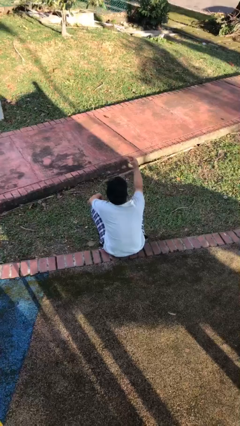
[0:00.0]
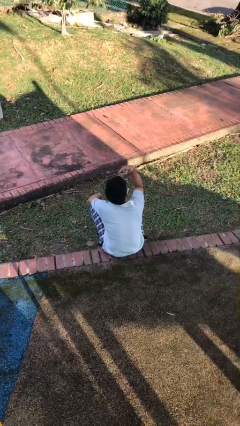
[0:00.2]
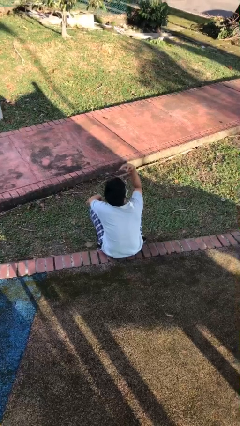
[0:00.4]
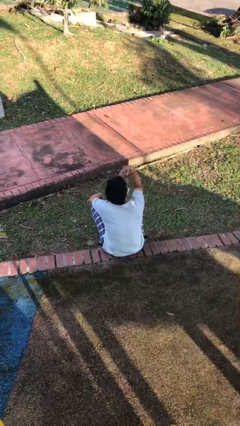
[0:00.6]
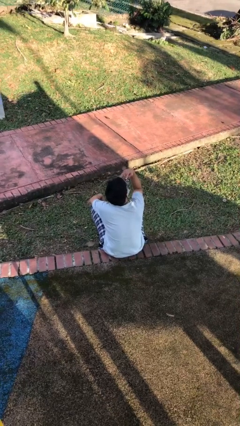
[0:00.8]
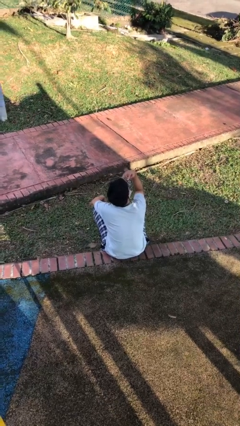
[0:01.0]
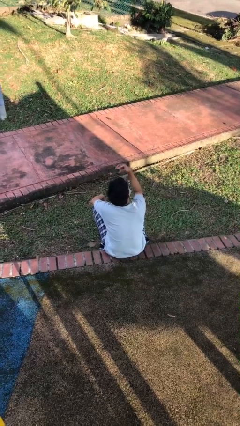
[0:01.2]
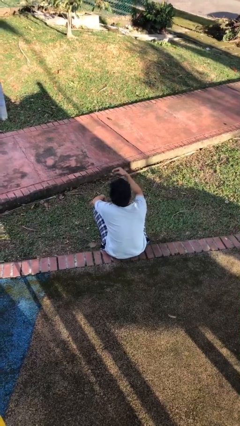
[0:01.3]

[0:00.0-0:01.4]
person gestures watch closely

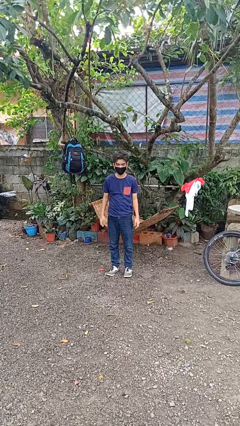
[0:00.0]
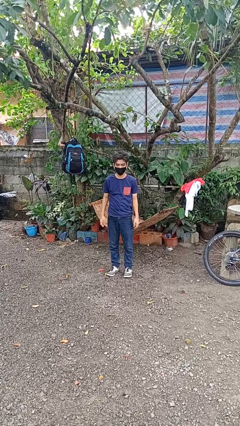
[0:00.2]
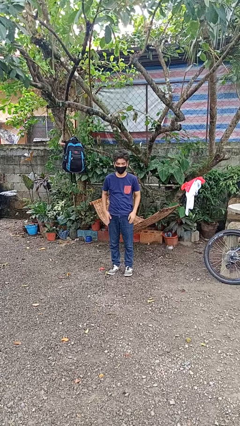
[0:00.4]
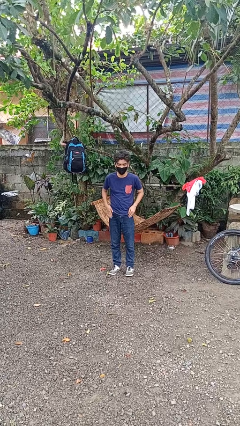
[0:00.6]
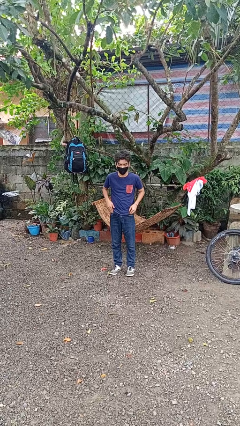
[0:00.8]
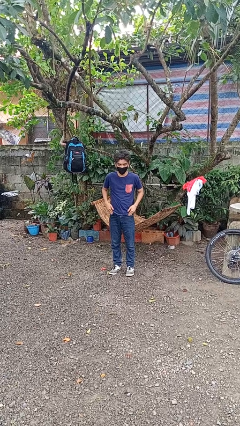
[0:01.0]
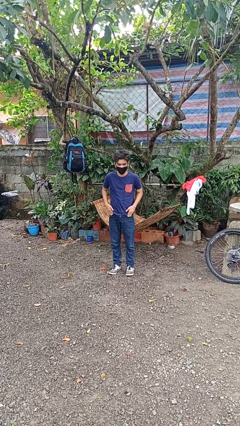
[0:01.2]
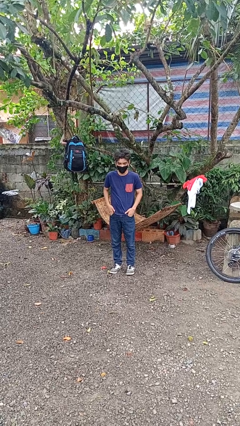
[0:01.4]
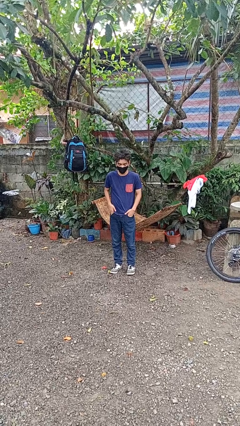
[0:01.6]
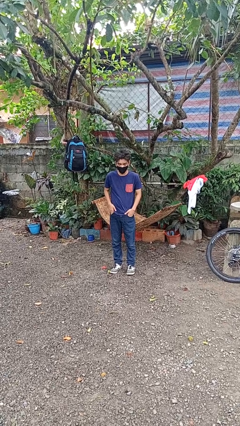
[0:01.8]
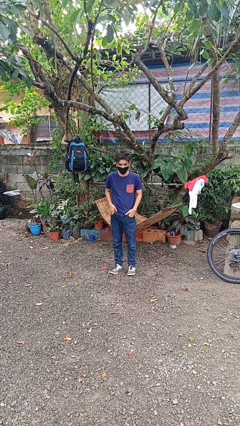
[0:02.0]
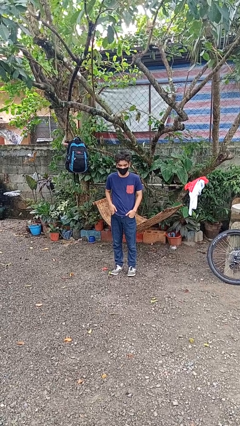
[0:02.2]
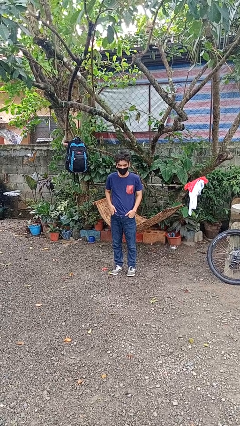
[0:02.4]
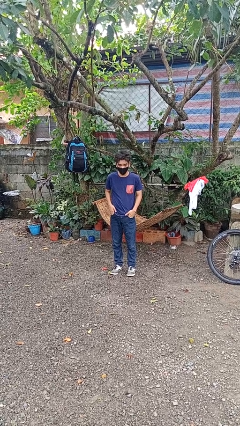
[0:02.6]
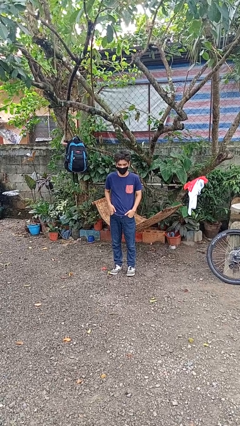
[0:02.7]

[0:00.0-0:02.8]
person puts hands in back pockets

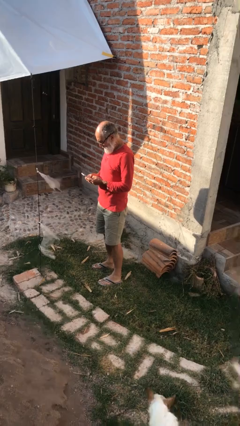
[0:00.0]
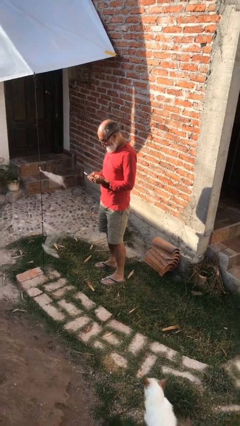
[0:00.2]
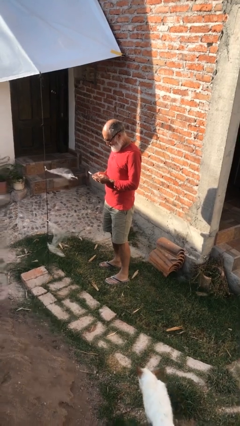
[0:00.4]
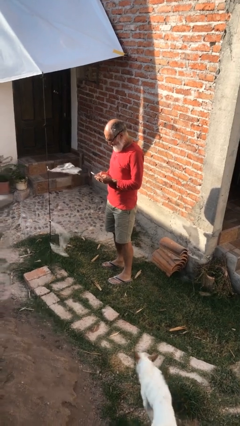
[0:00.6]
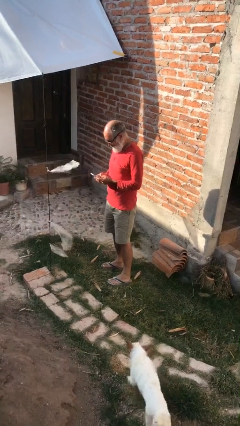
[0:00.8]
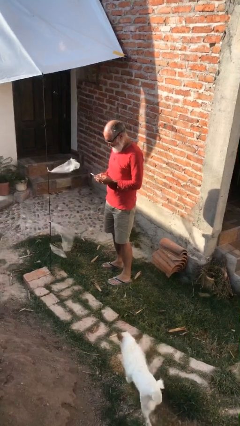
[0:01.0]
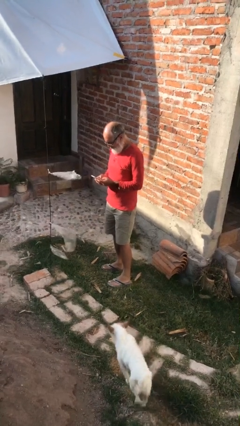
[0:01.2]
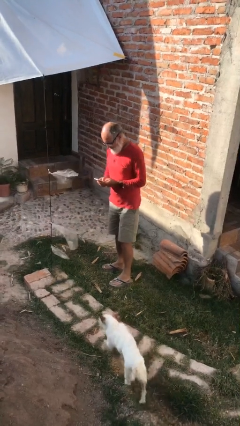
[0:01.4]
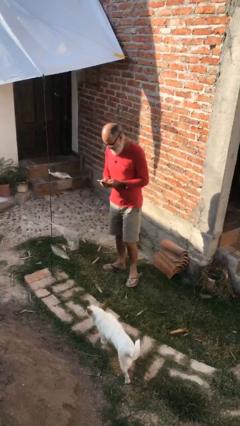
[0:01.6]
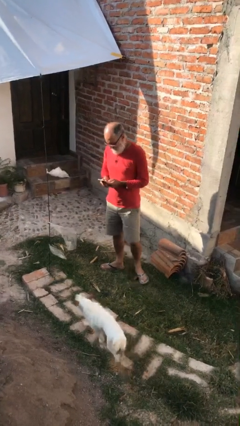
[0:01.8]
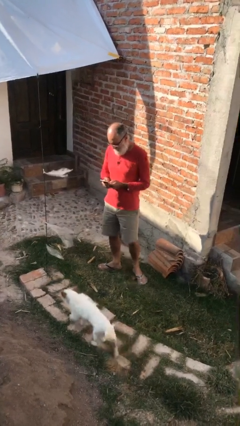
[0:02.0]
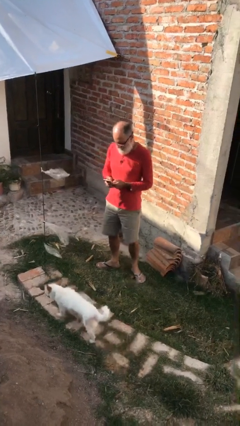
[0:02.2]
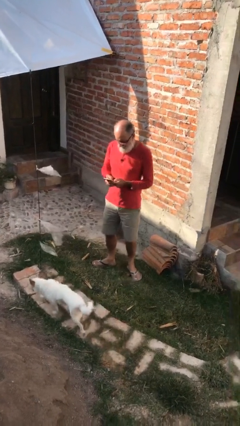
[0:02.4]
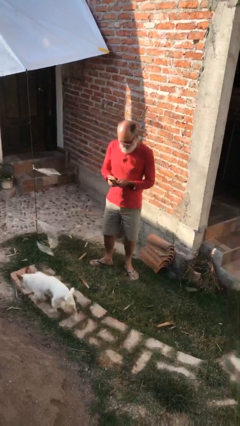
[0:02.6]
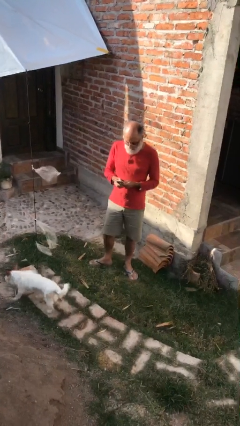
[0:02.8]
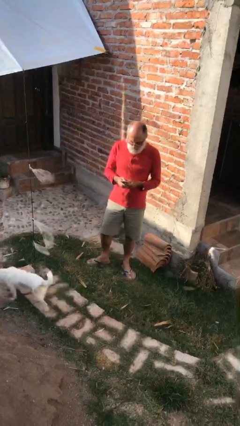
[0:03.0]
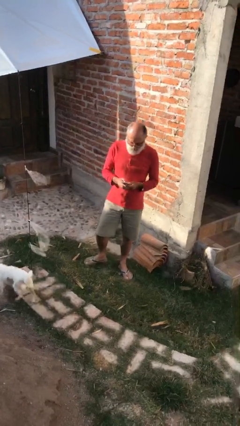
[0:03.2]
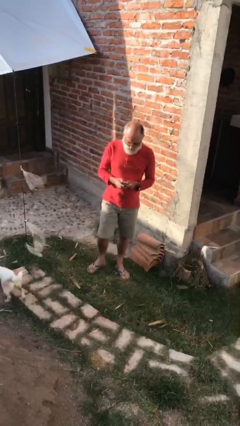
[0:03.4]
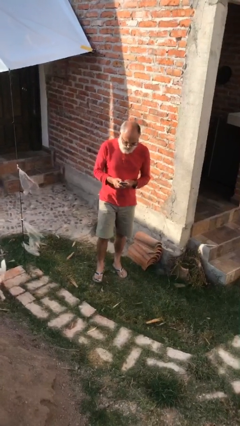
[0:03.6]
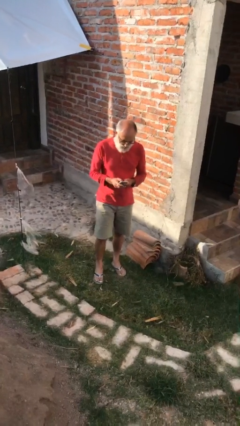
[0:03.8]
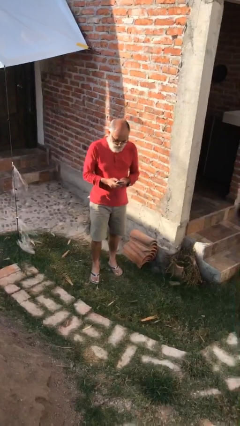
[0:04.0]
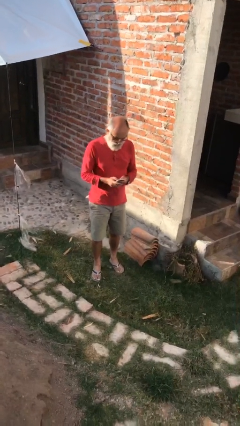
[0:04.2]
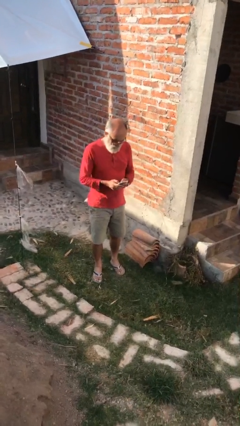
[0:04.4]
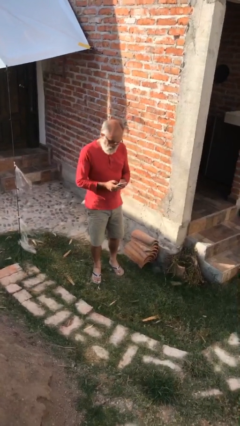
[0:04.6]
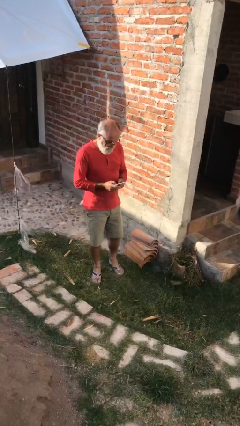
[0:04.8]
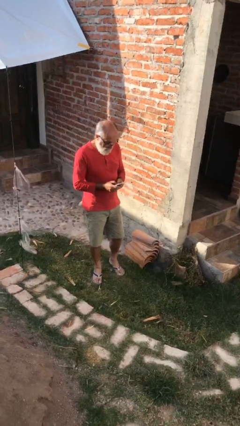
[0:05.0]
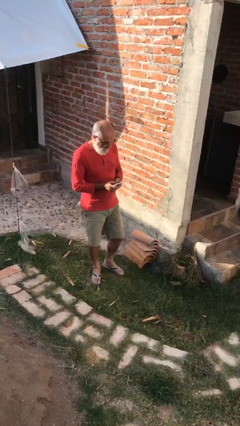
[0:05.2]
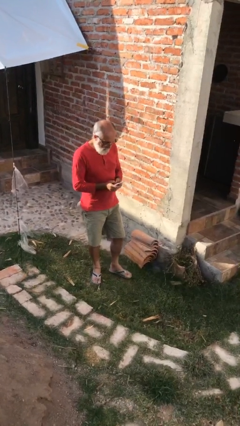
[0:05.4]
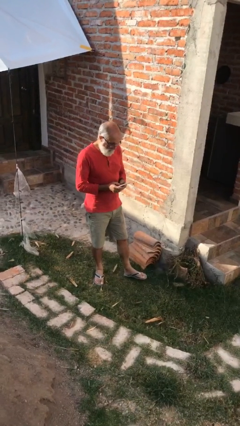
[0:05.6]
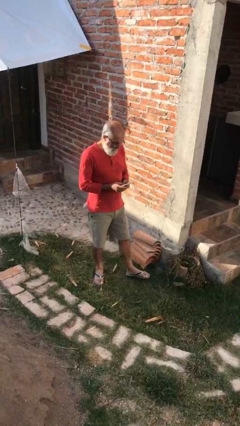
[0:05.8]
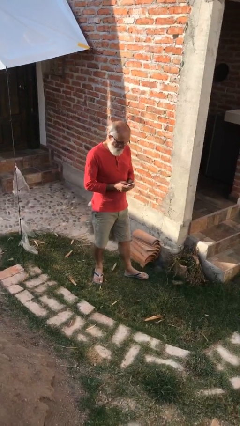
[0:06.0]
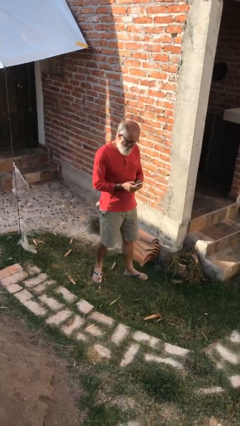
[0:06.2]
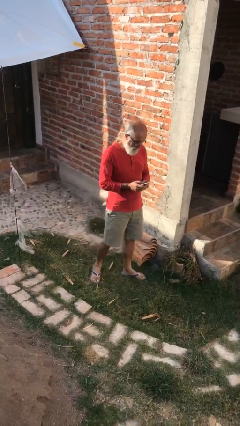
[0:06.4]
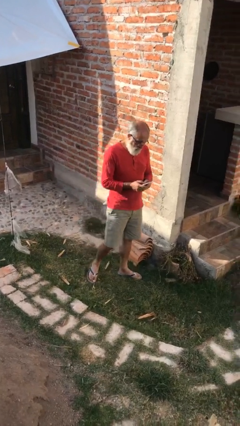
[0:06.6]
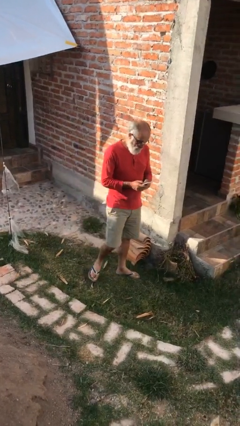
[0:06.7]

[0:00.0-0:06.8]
person texts on phone

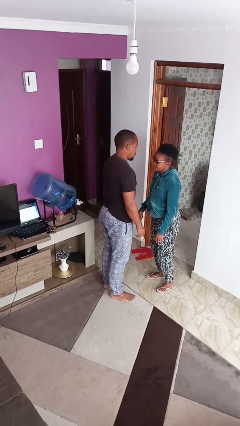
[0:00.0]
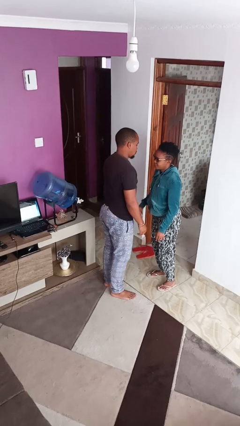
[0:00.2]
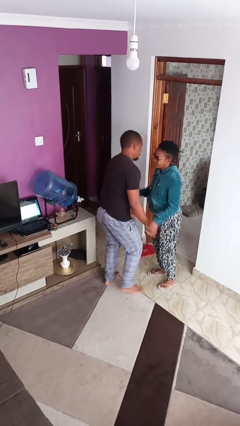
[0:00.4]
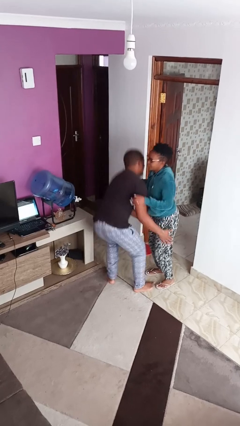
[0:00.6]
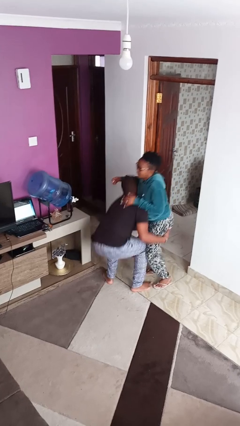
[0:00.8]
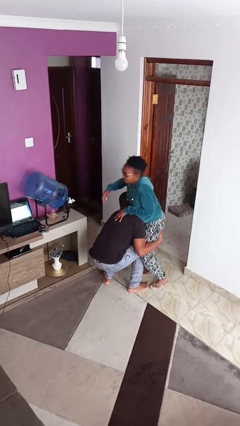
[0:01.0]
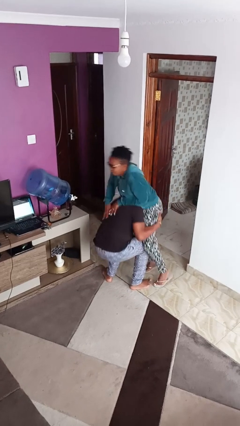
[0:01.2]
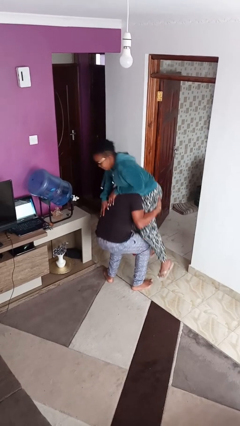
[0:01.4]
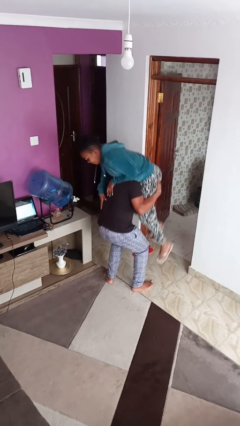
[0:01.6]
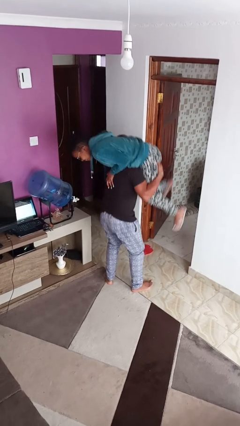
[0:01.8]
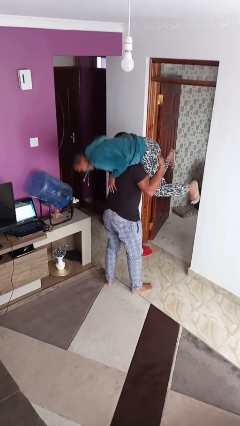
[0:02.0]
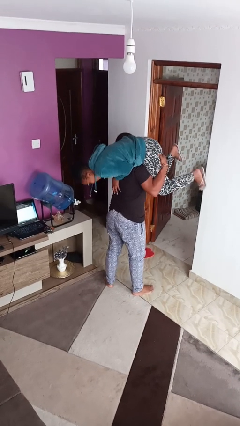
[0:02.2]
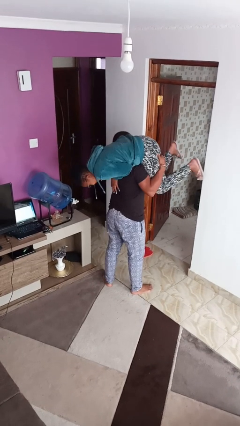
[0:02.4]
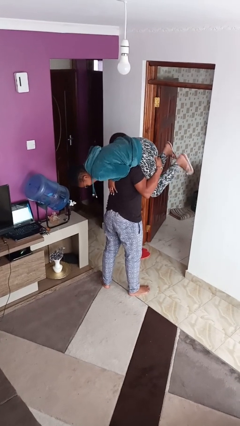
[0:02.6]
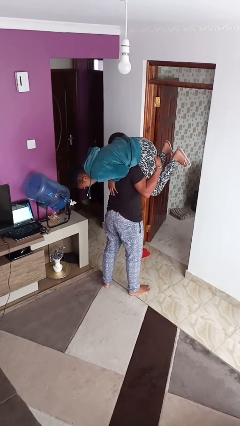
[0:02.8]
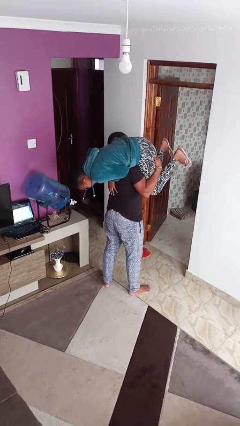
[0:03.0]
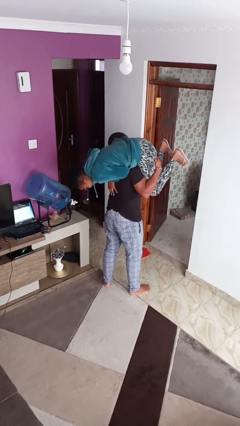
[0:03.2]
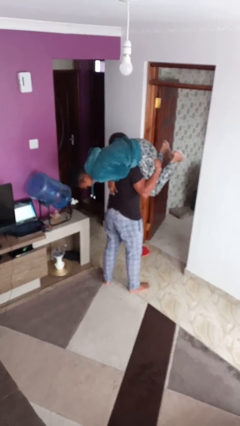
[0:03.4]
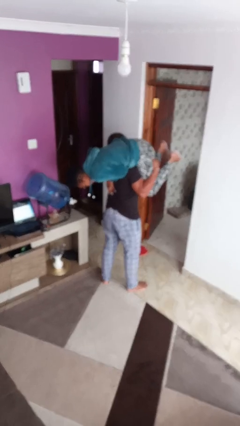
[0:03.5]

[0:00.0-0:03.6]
person carries person over shoulder

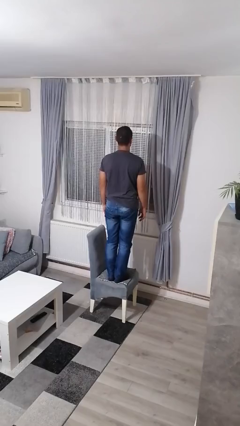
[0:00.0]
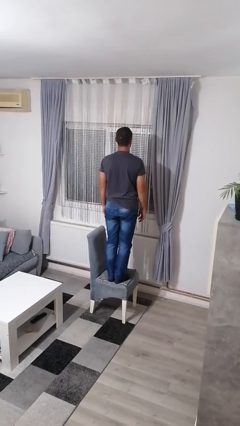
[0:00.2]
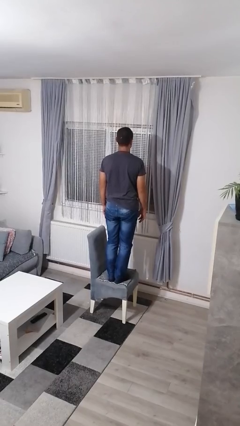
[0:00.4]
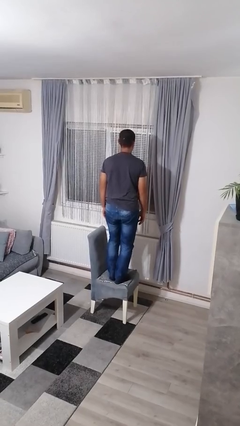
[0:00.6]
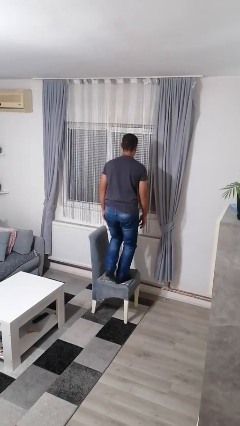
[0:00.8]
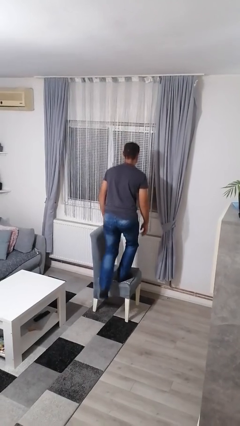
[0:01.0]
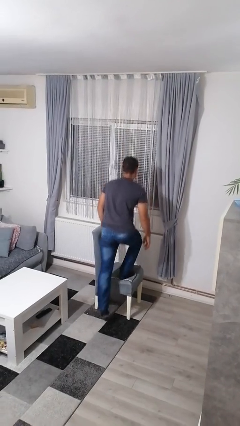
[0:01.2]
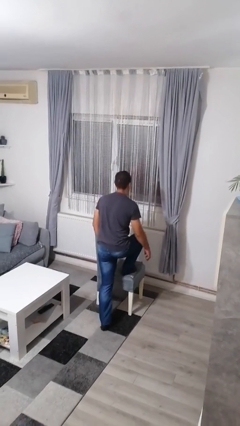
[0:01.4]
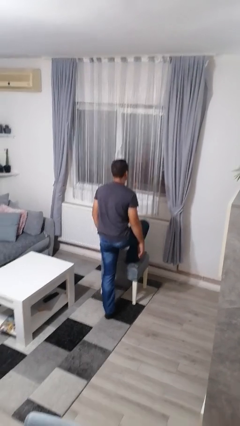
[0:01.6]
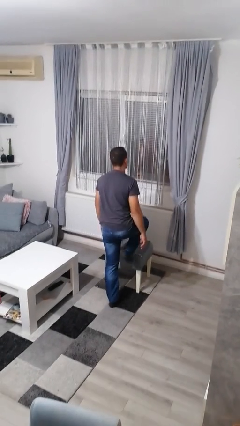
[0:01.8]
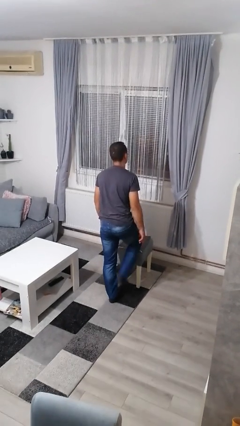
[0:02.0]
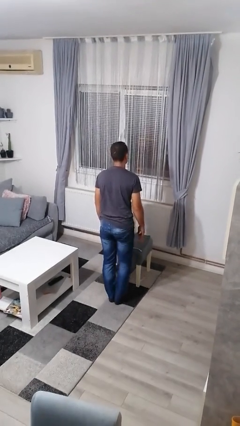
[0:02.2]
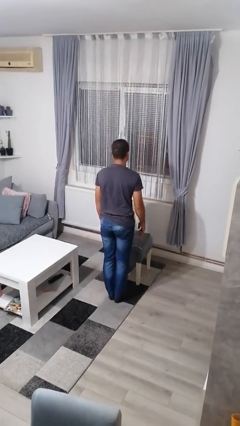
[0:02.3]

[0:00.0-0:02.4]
person climbs off chair

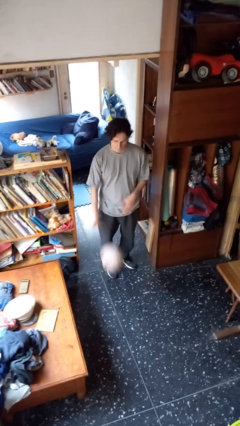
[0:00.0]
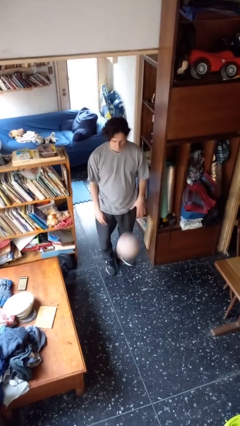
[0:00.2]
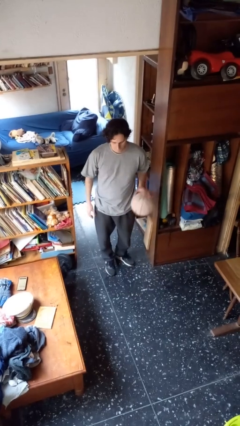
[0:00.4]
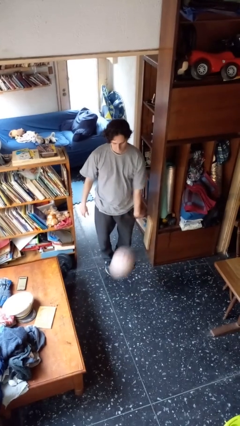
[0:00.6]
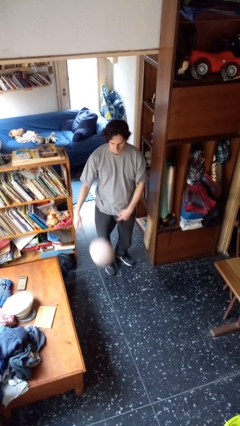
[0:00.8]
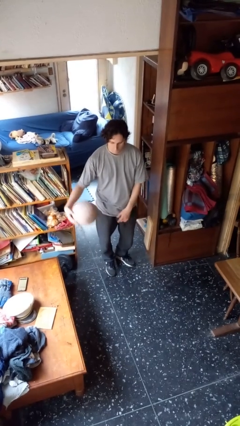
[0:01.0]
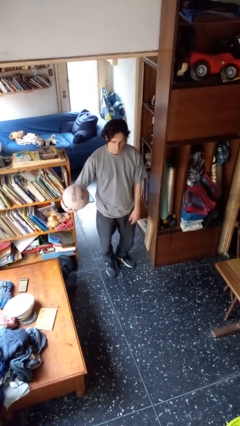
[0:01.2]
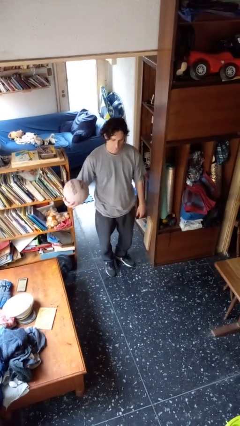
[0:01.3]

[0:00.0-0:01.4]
person bounces ball on floor
